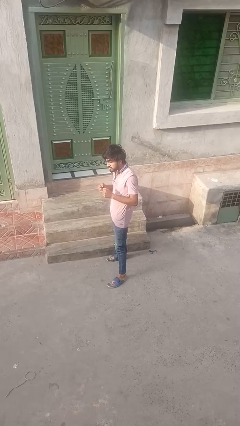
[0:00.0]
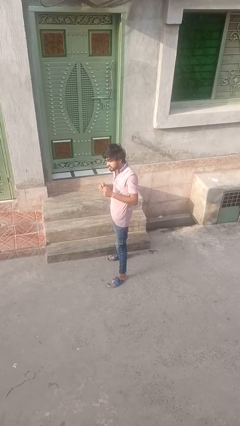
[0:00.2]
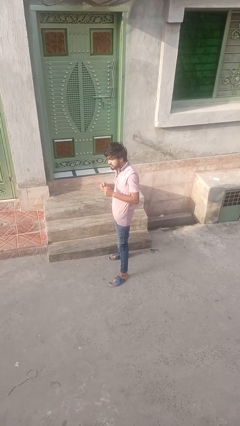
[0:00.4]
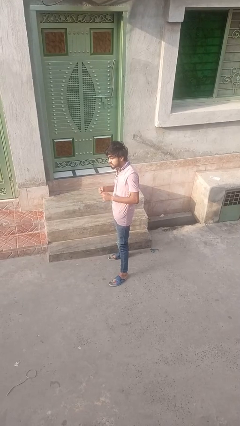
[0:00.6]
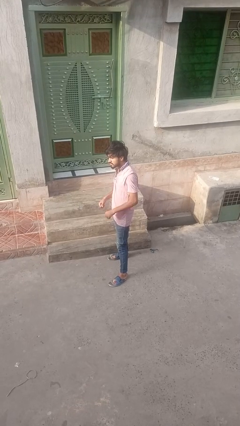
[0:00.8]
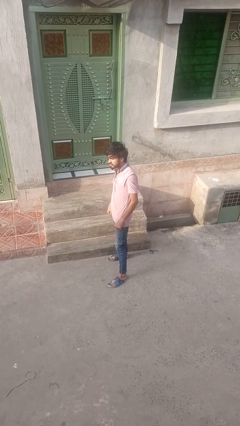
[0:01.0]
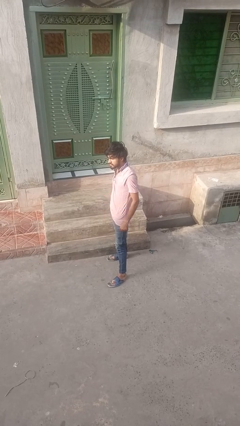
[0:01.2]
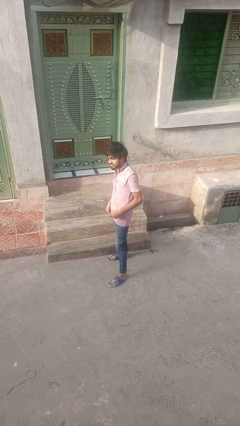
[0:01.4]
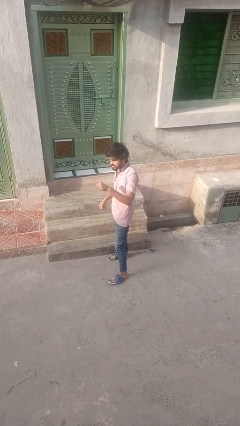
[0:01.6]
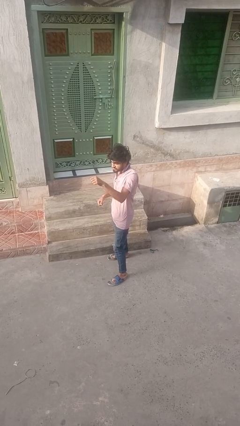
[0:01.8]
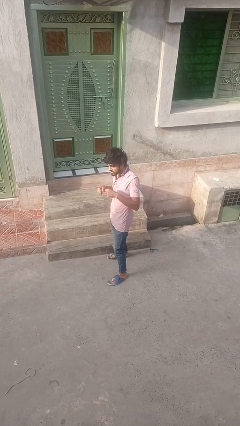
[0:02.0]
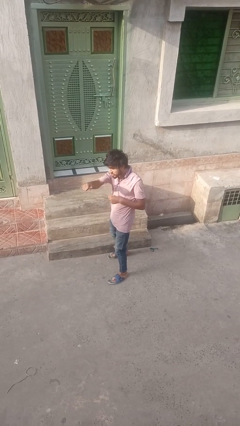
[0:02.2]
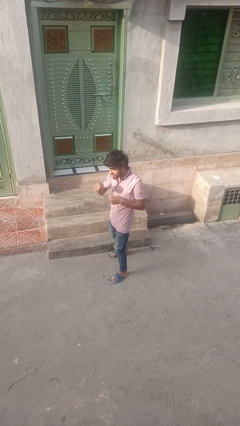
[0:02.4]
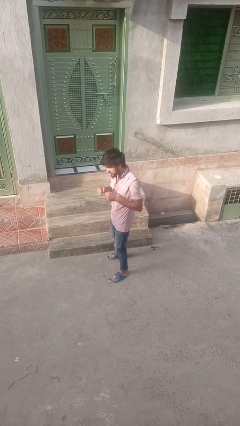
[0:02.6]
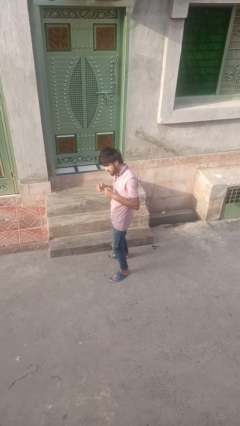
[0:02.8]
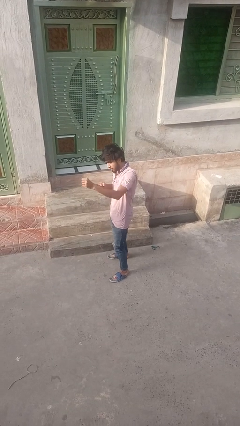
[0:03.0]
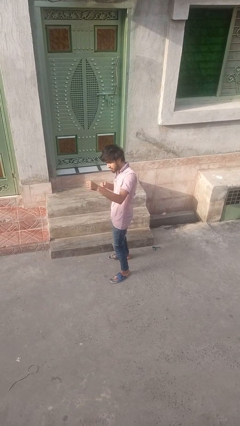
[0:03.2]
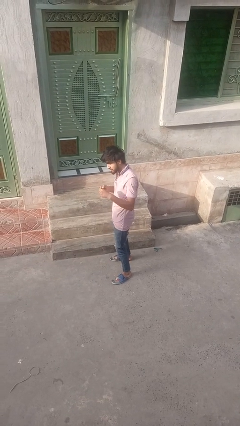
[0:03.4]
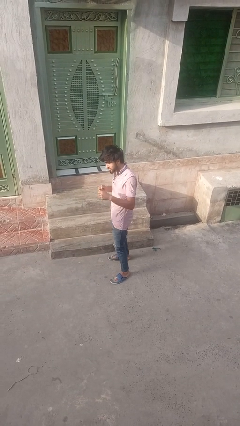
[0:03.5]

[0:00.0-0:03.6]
person punches

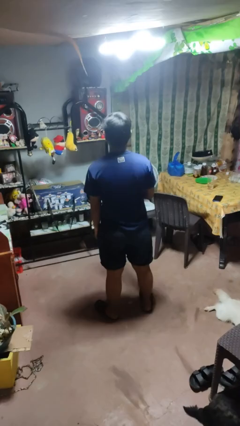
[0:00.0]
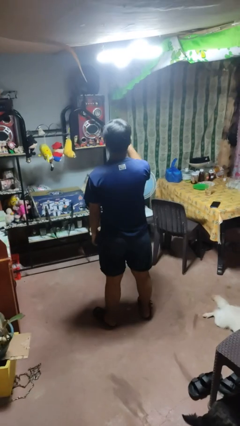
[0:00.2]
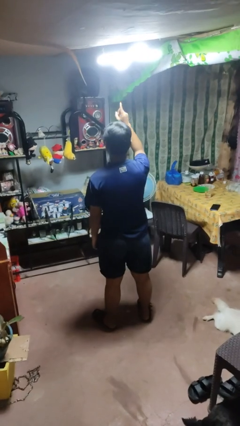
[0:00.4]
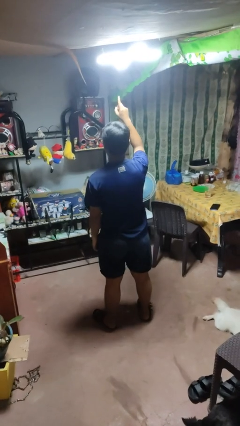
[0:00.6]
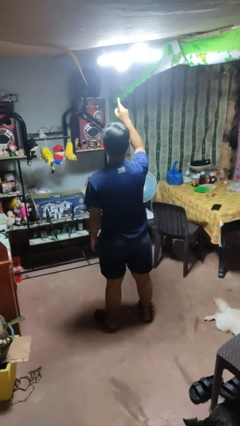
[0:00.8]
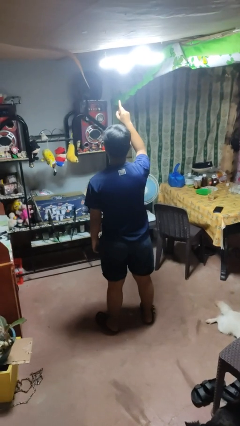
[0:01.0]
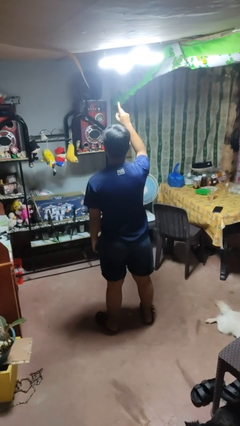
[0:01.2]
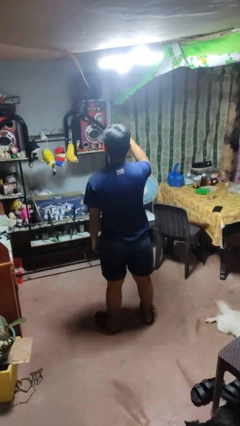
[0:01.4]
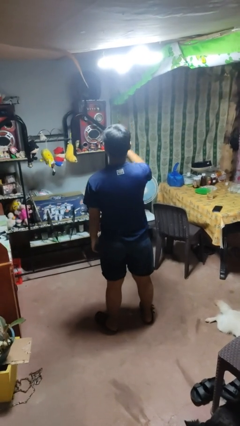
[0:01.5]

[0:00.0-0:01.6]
person gestures number one

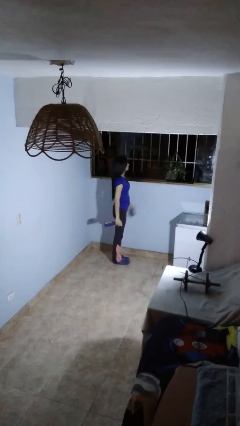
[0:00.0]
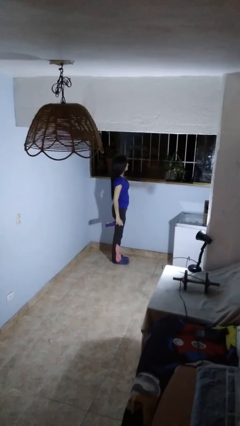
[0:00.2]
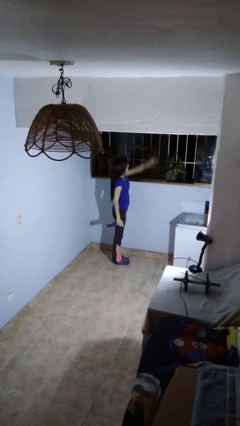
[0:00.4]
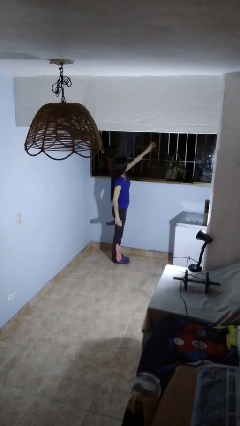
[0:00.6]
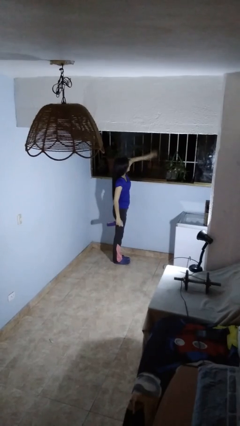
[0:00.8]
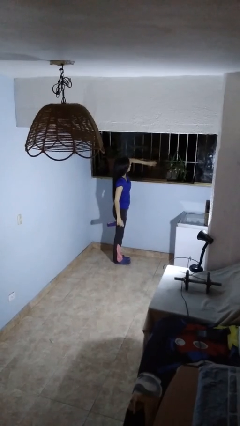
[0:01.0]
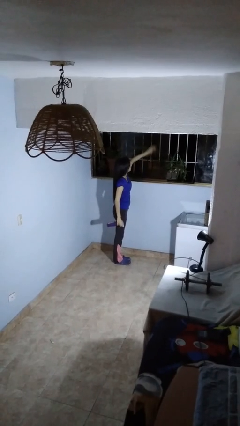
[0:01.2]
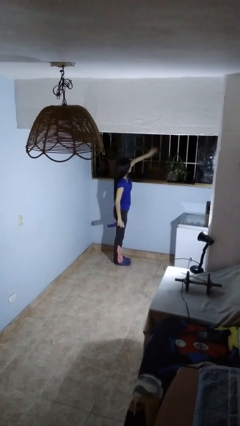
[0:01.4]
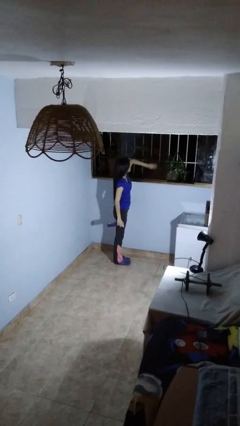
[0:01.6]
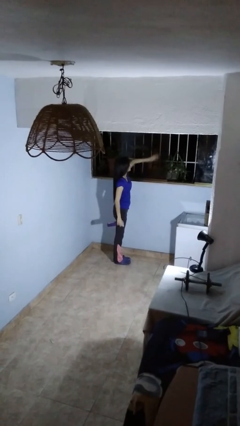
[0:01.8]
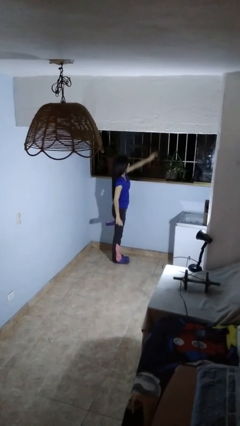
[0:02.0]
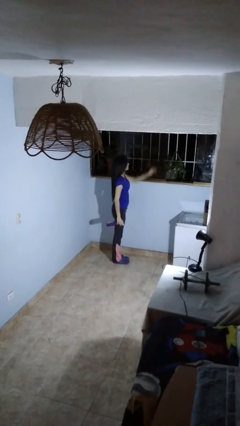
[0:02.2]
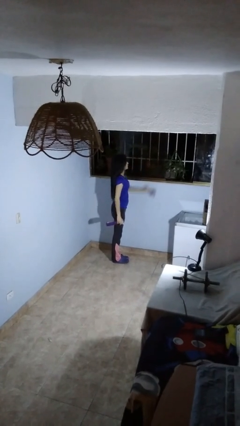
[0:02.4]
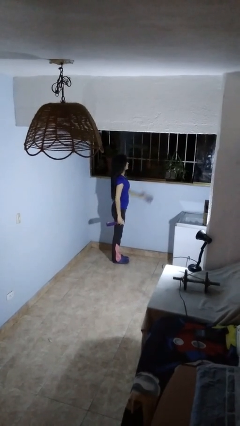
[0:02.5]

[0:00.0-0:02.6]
person washes window

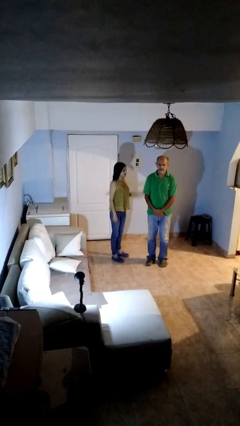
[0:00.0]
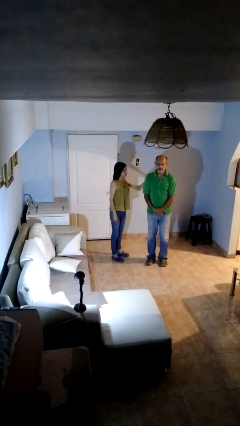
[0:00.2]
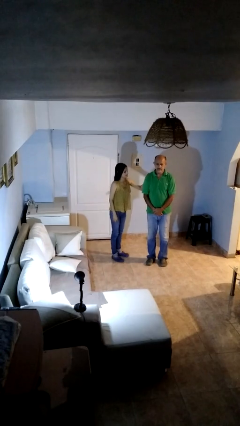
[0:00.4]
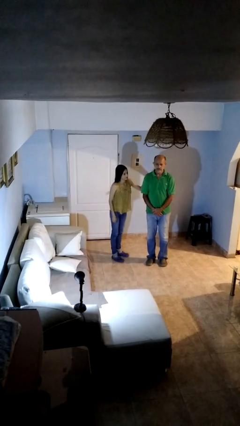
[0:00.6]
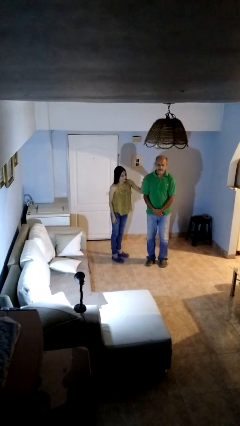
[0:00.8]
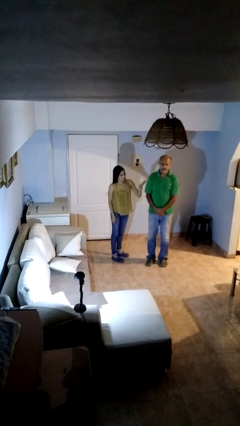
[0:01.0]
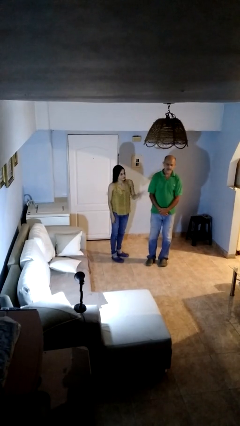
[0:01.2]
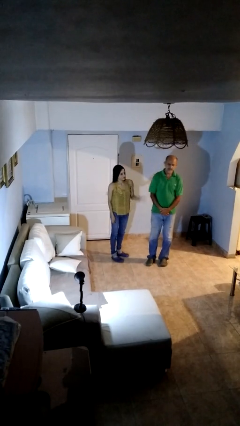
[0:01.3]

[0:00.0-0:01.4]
person shoves person

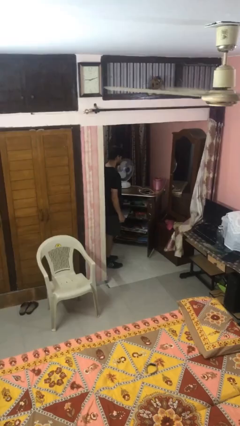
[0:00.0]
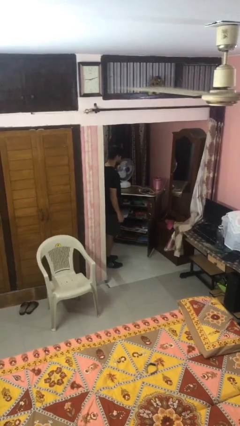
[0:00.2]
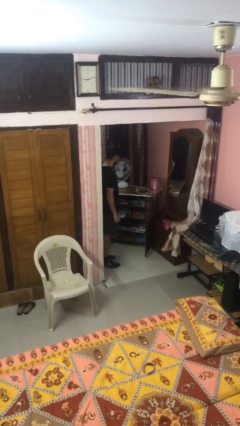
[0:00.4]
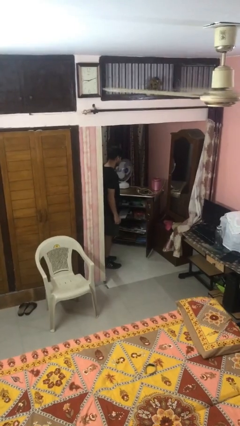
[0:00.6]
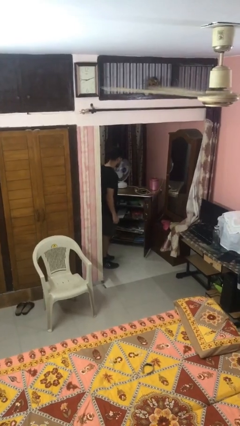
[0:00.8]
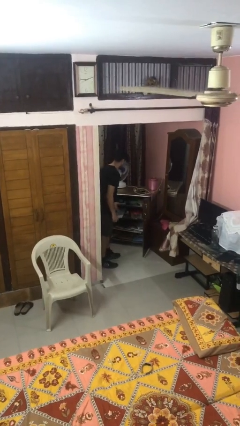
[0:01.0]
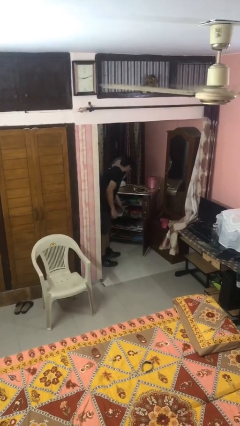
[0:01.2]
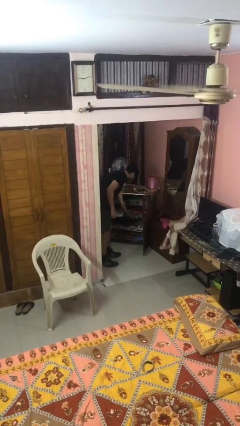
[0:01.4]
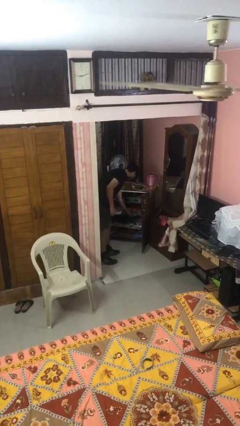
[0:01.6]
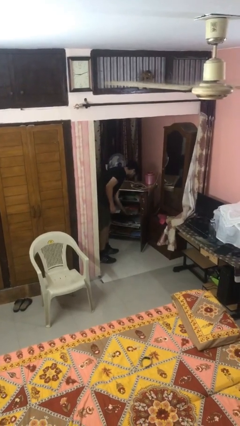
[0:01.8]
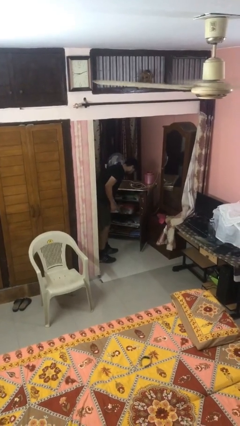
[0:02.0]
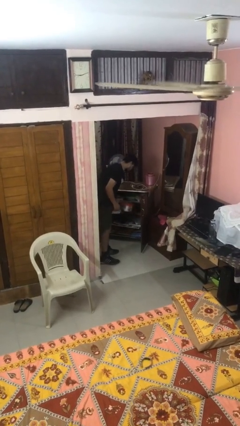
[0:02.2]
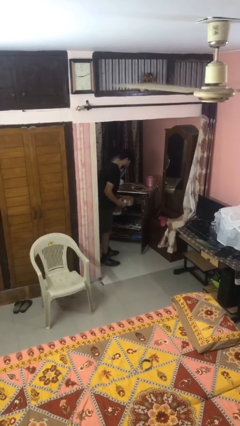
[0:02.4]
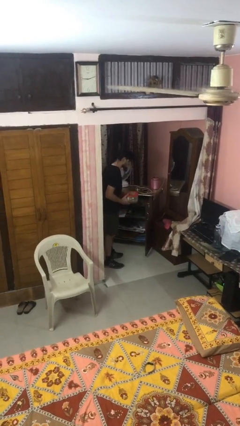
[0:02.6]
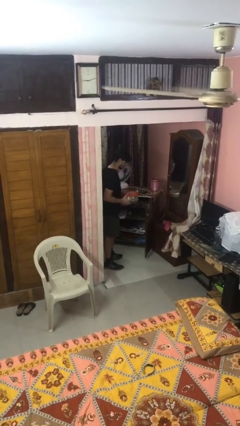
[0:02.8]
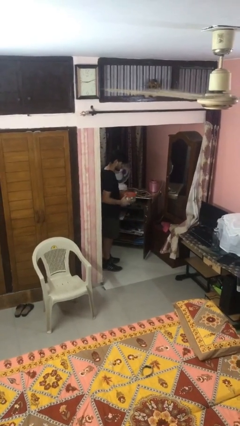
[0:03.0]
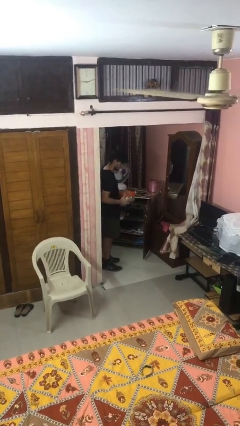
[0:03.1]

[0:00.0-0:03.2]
person picks up object from cabinet

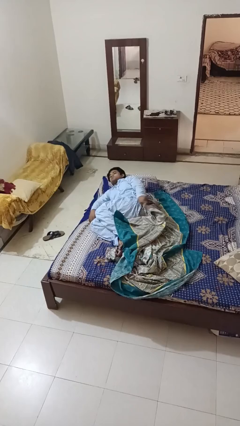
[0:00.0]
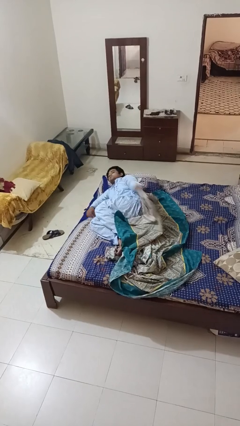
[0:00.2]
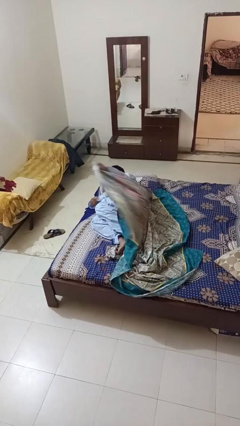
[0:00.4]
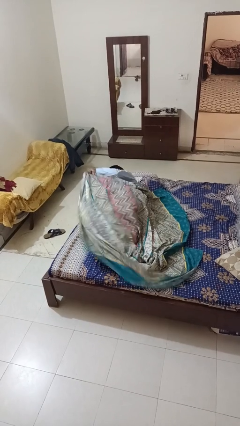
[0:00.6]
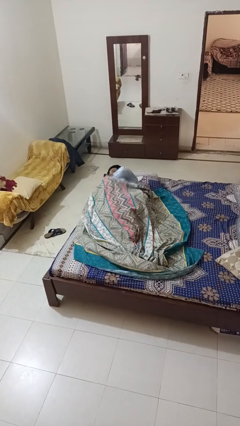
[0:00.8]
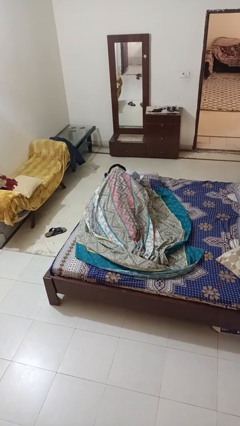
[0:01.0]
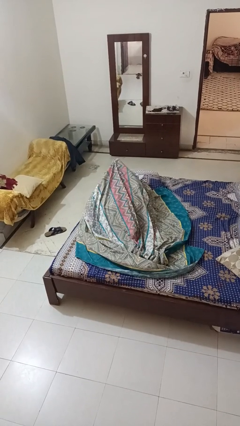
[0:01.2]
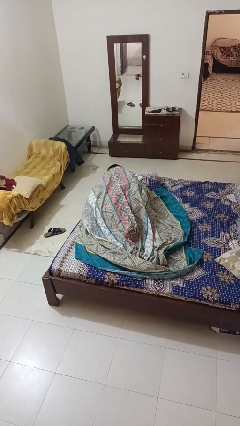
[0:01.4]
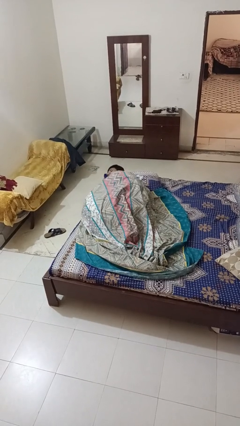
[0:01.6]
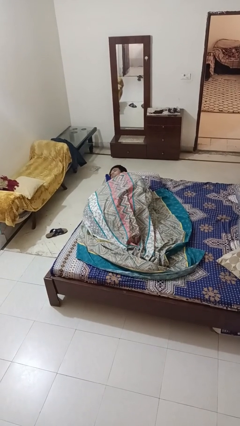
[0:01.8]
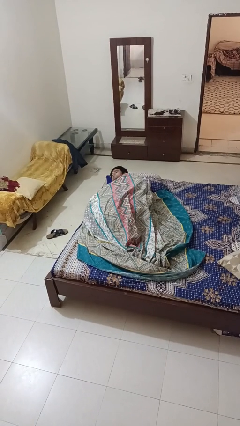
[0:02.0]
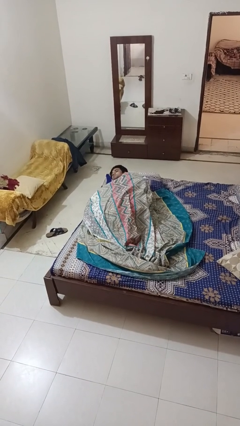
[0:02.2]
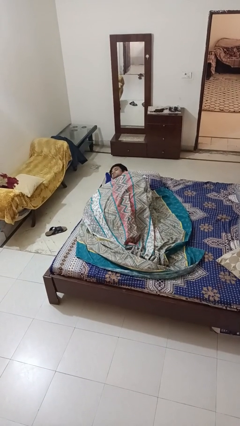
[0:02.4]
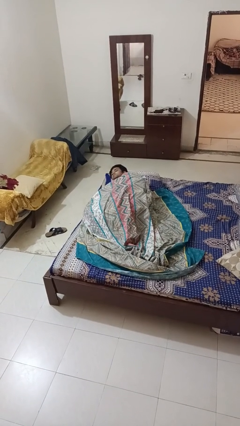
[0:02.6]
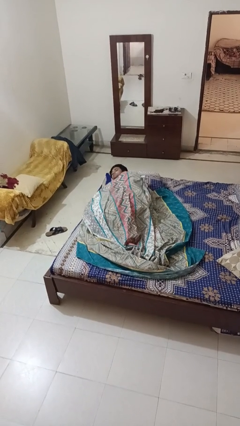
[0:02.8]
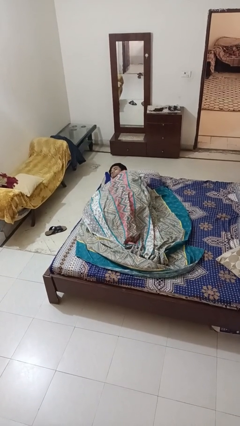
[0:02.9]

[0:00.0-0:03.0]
person covers with bedsheets

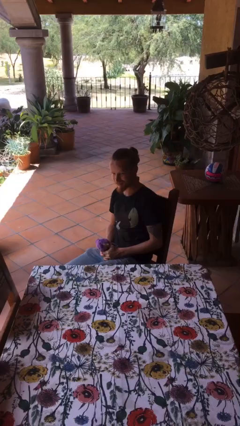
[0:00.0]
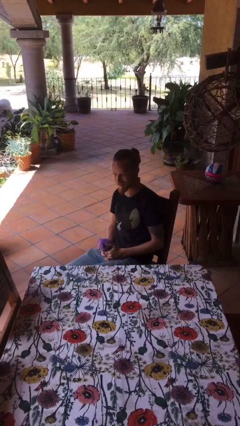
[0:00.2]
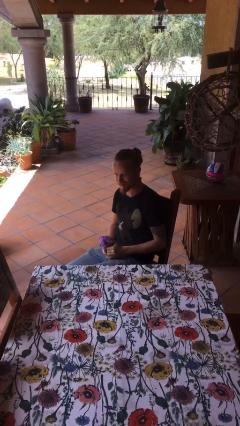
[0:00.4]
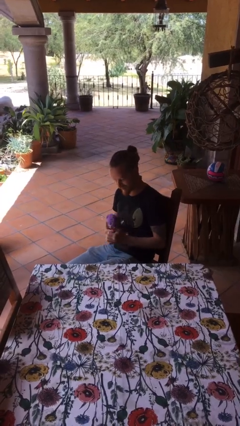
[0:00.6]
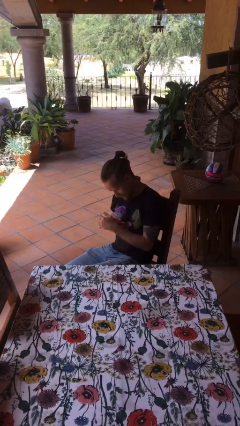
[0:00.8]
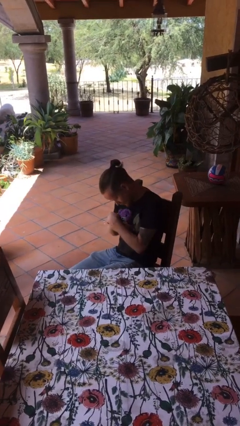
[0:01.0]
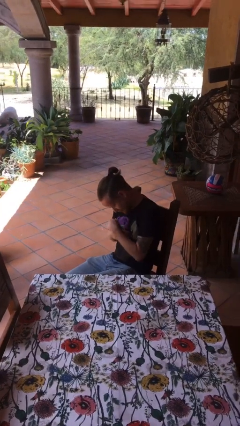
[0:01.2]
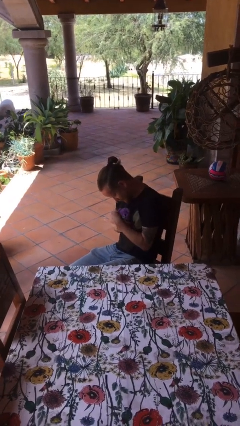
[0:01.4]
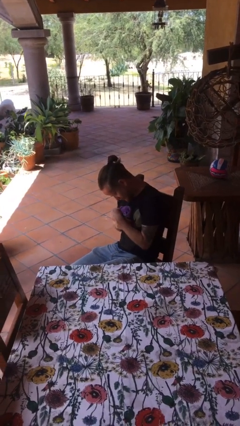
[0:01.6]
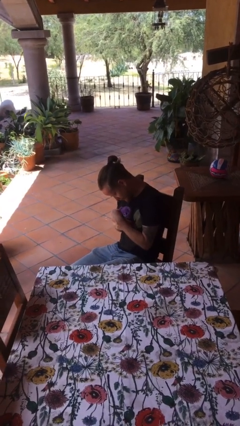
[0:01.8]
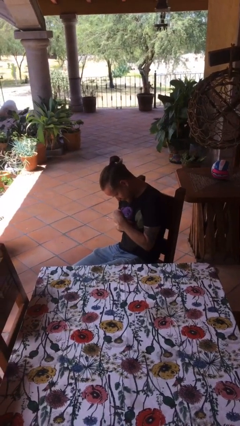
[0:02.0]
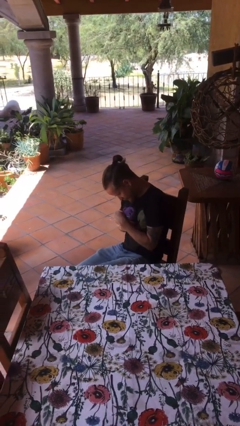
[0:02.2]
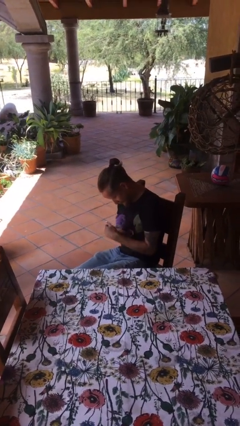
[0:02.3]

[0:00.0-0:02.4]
person hugs stuffed animal
